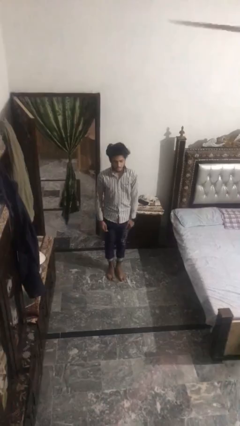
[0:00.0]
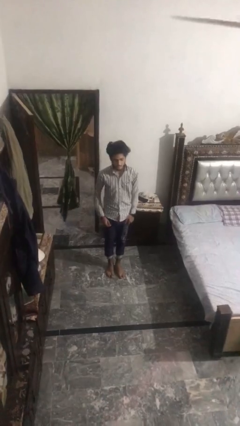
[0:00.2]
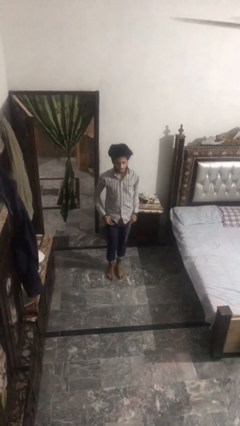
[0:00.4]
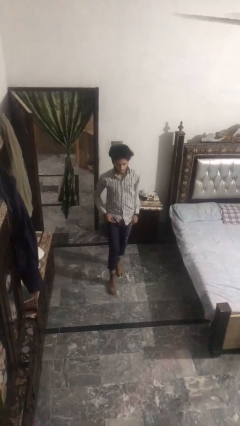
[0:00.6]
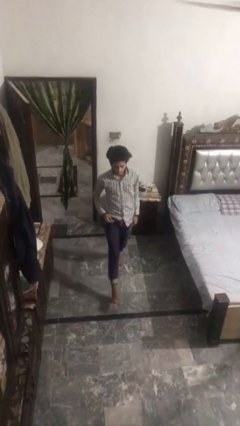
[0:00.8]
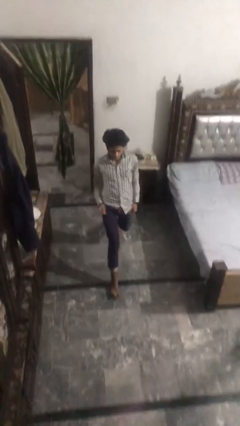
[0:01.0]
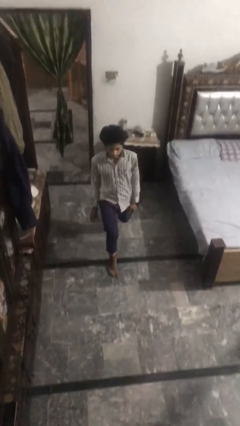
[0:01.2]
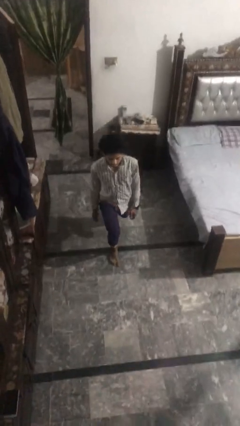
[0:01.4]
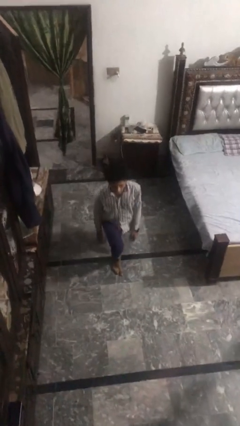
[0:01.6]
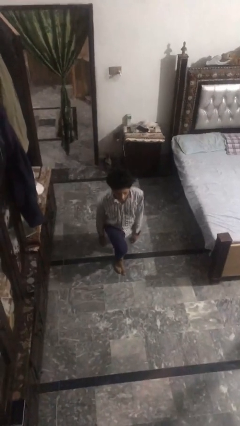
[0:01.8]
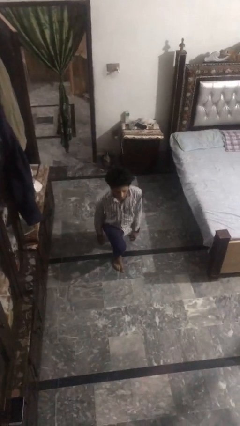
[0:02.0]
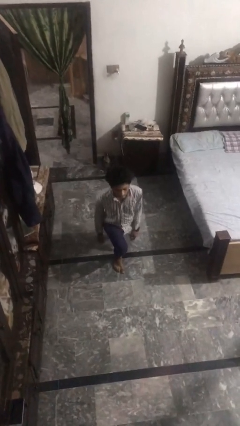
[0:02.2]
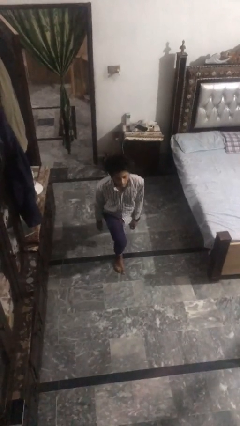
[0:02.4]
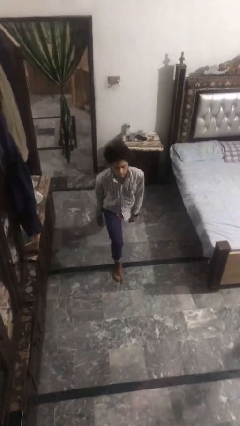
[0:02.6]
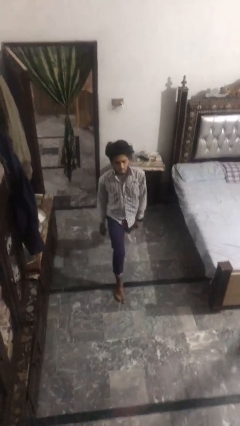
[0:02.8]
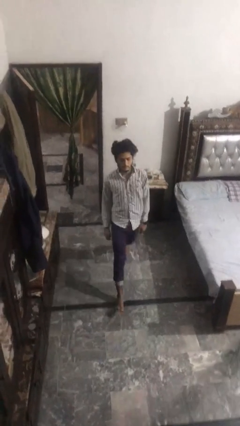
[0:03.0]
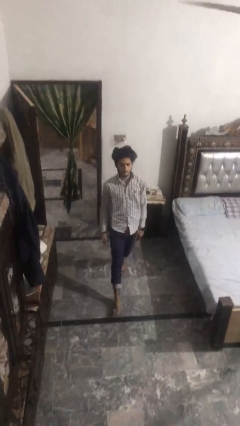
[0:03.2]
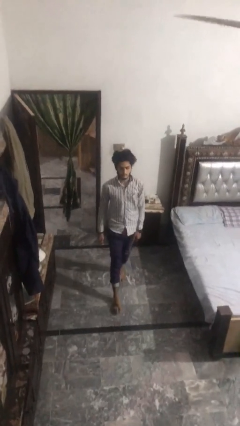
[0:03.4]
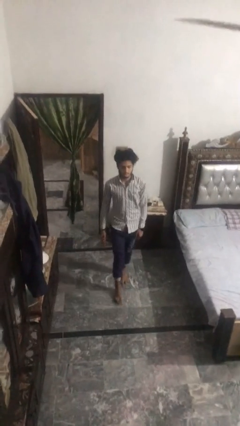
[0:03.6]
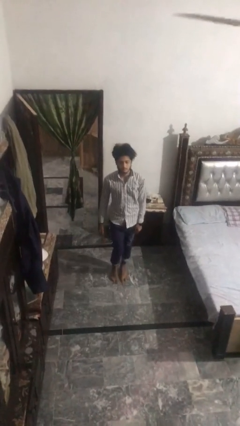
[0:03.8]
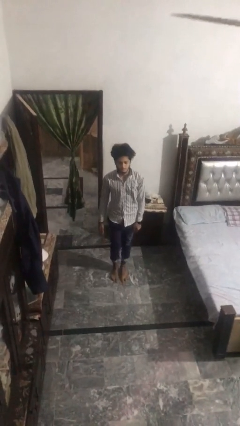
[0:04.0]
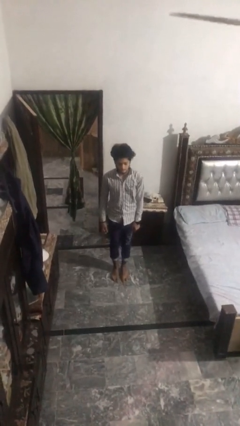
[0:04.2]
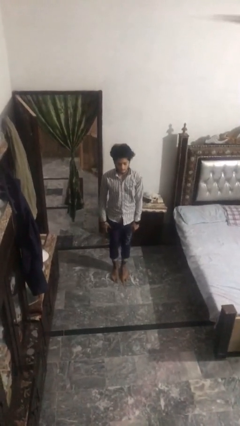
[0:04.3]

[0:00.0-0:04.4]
person exercises with lunges

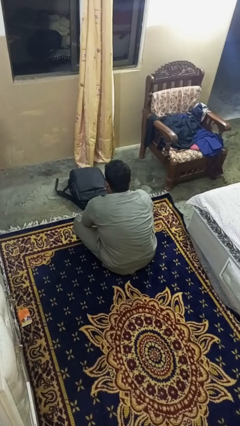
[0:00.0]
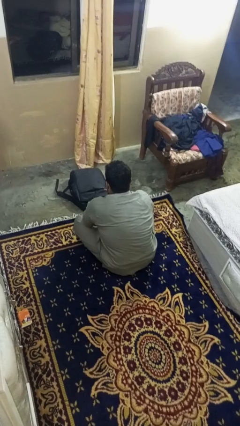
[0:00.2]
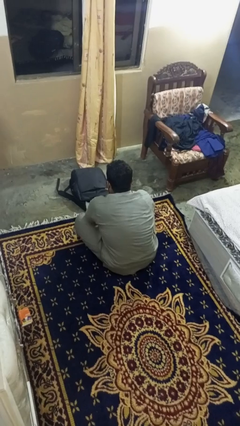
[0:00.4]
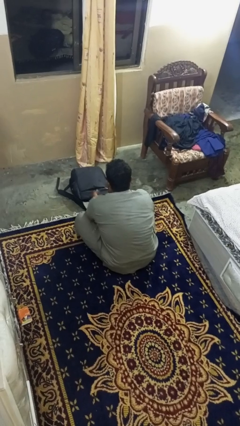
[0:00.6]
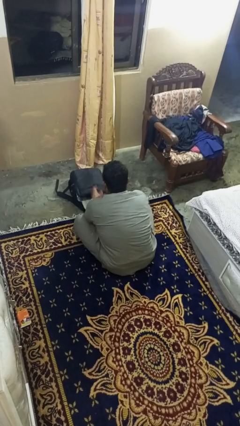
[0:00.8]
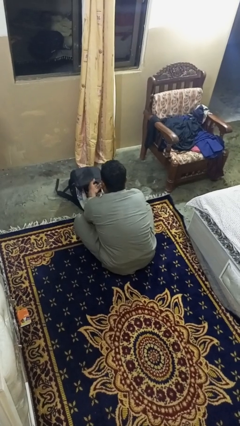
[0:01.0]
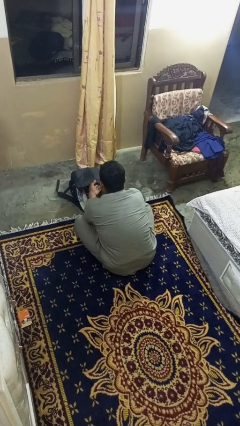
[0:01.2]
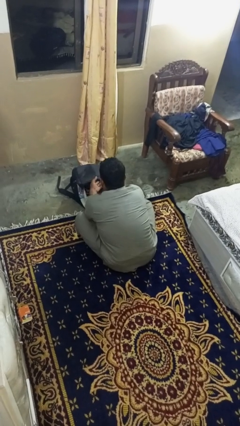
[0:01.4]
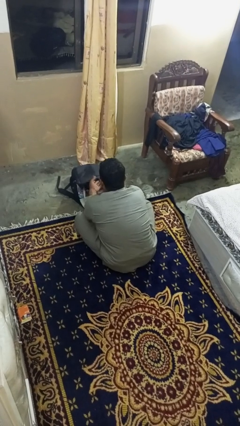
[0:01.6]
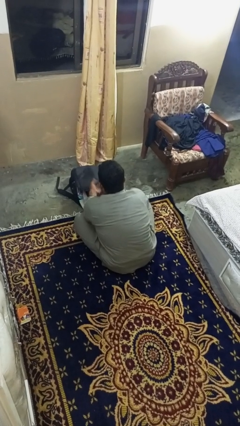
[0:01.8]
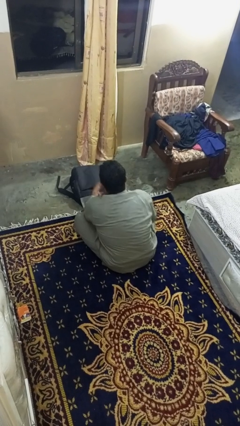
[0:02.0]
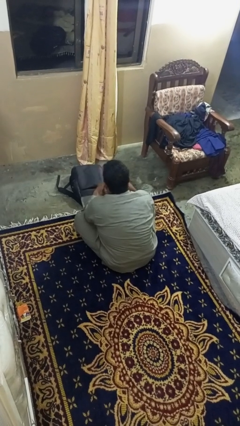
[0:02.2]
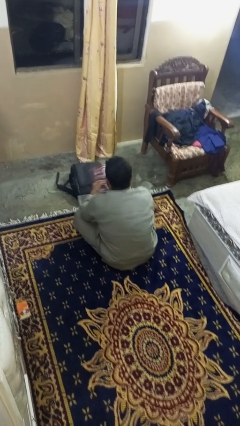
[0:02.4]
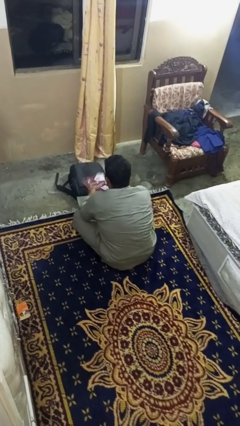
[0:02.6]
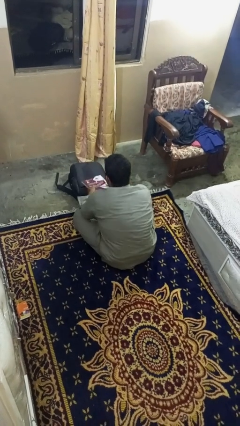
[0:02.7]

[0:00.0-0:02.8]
person takes object from bag

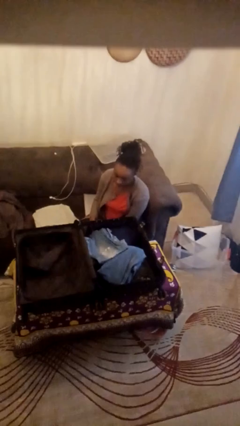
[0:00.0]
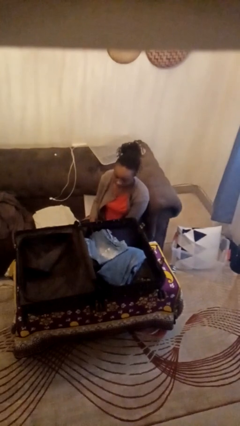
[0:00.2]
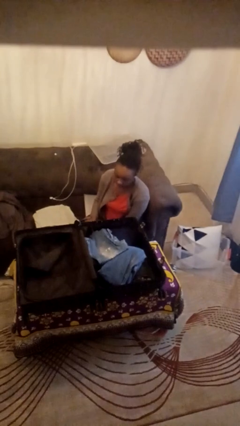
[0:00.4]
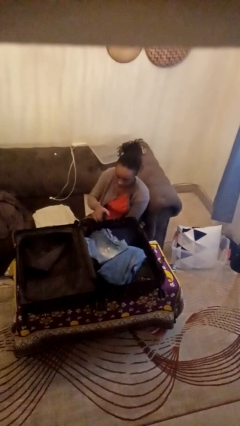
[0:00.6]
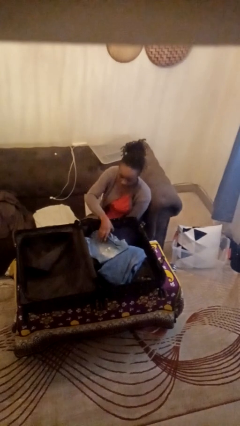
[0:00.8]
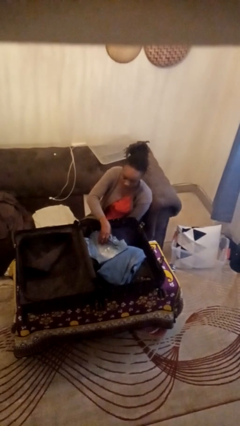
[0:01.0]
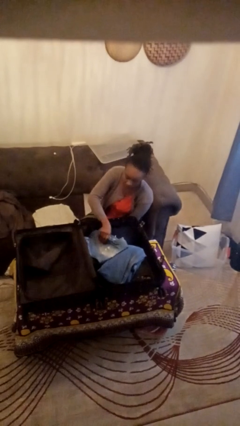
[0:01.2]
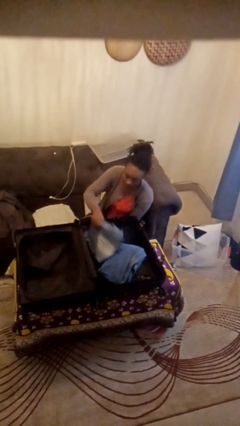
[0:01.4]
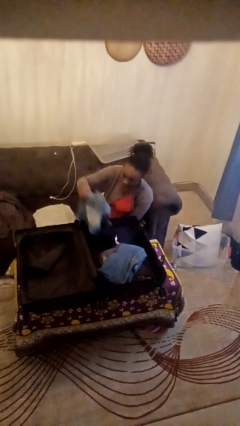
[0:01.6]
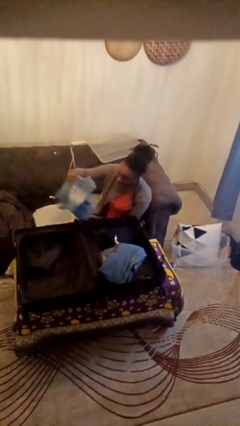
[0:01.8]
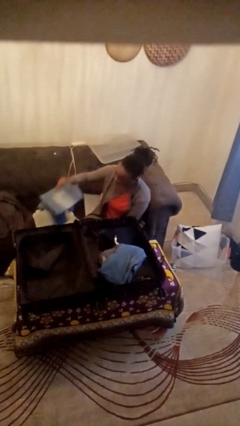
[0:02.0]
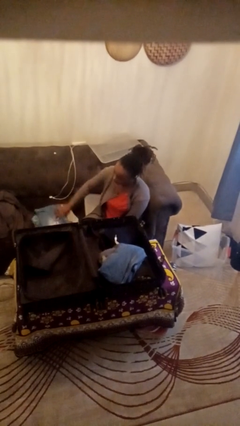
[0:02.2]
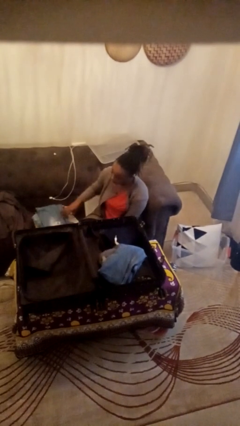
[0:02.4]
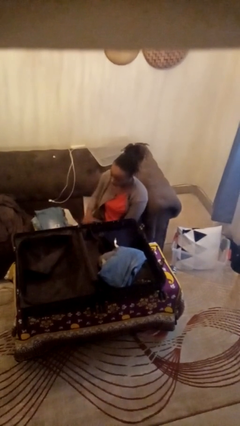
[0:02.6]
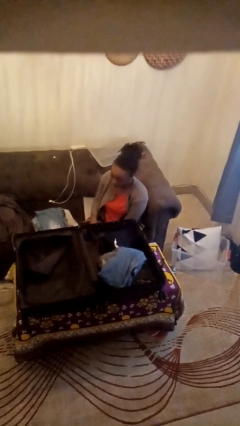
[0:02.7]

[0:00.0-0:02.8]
person unloads clothes from suitcase

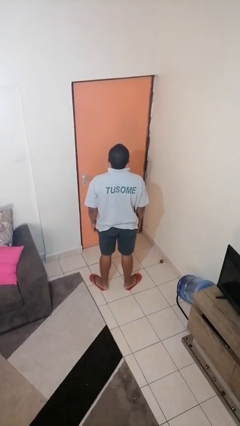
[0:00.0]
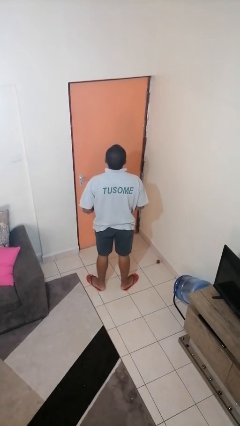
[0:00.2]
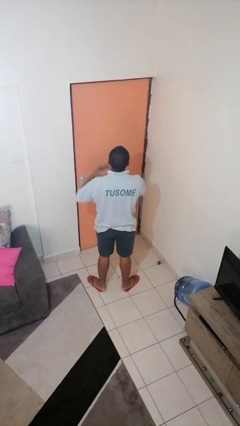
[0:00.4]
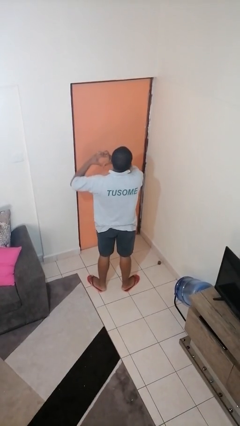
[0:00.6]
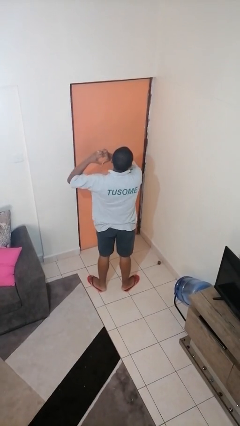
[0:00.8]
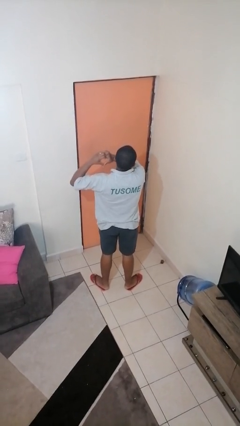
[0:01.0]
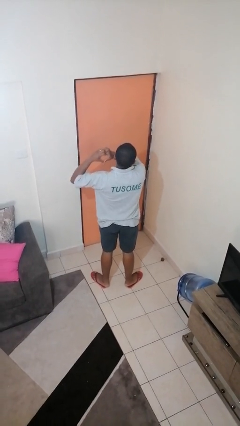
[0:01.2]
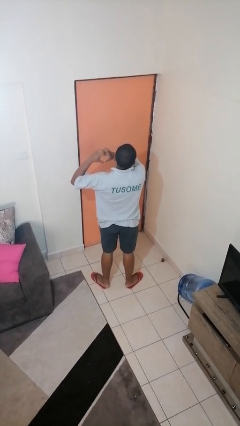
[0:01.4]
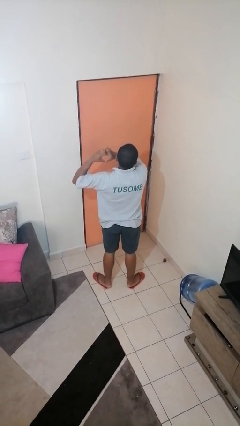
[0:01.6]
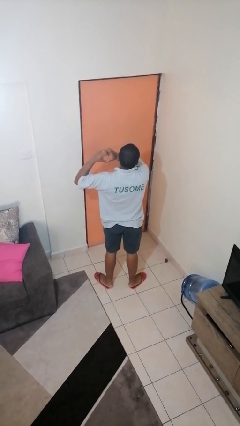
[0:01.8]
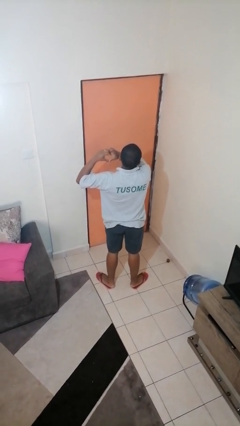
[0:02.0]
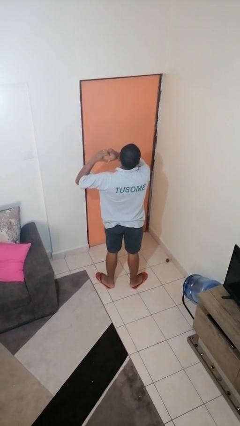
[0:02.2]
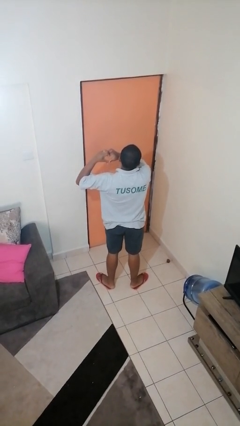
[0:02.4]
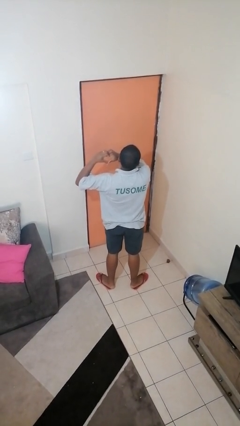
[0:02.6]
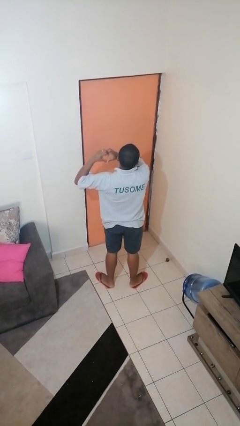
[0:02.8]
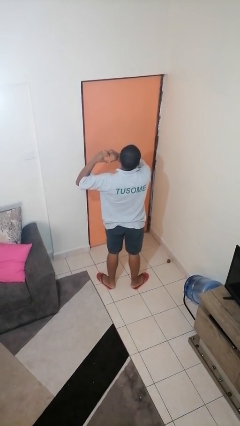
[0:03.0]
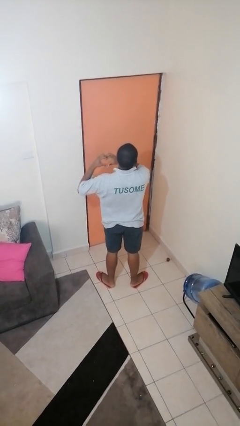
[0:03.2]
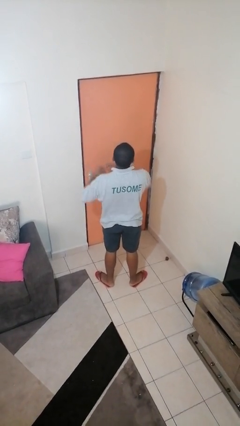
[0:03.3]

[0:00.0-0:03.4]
person gestures heart

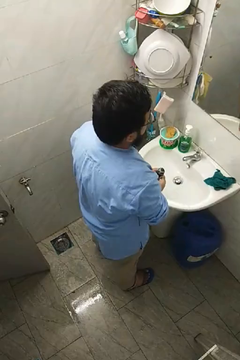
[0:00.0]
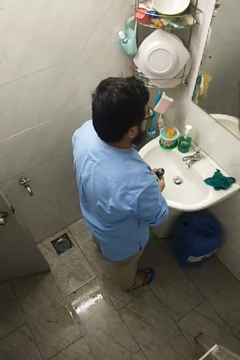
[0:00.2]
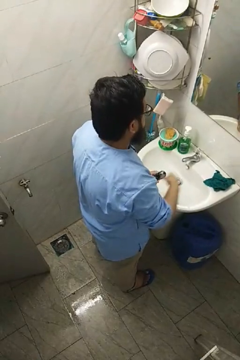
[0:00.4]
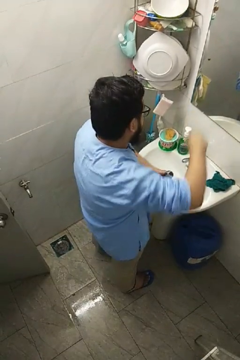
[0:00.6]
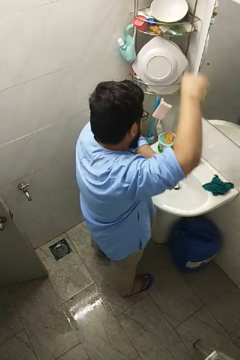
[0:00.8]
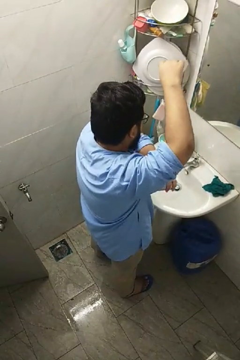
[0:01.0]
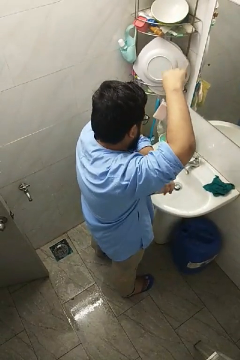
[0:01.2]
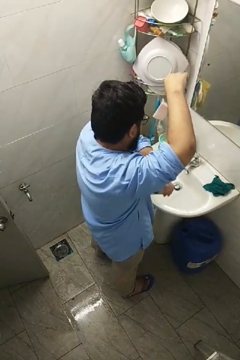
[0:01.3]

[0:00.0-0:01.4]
person applies deodorant

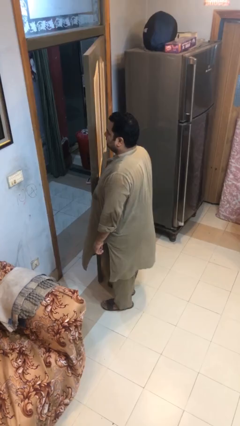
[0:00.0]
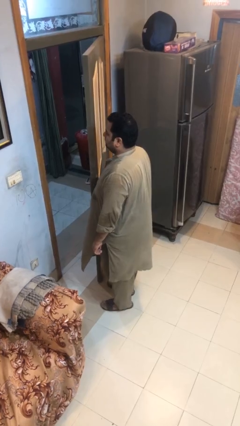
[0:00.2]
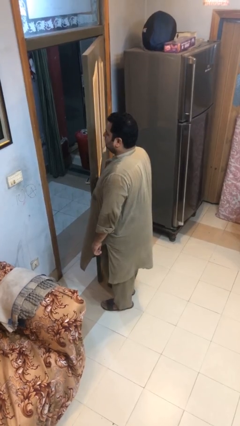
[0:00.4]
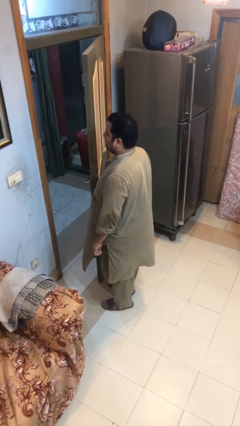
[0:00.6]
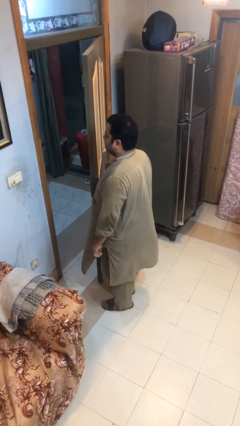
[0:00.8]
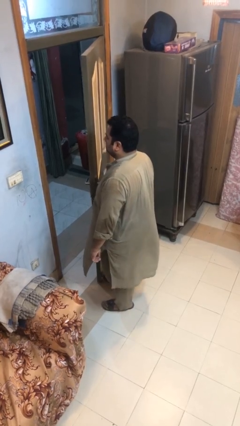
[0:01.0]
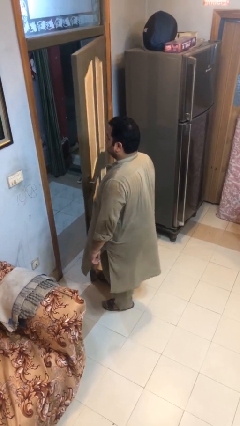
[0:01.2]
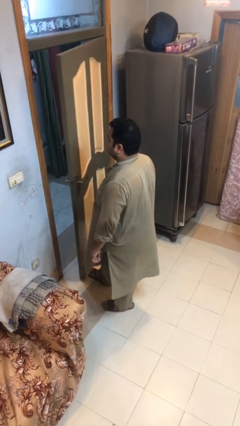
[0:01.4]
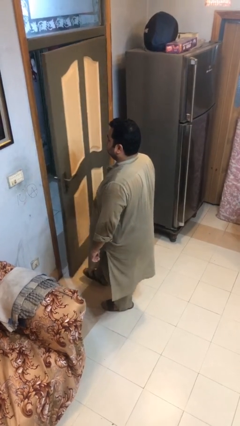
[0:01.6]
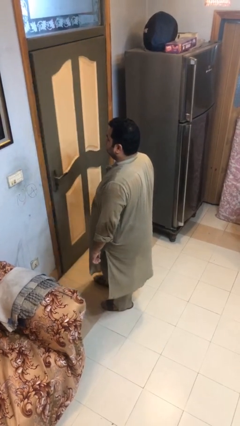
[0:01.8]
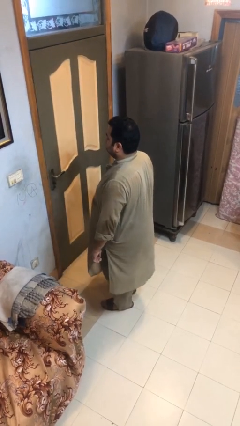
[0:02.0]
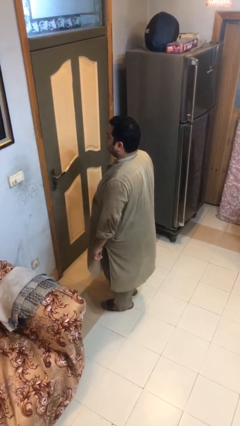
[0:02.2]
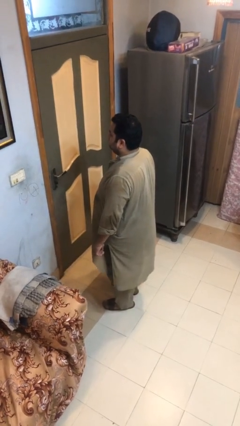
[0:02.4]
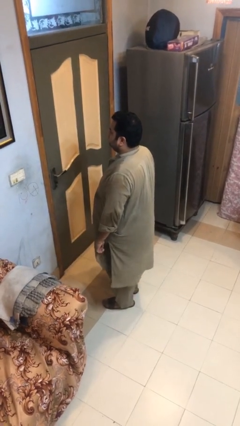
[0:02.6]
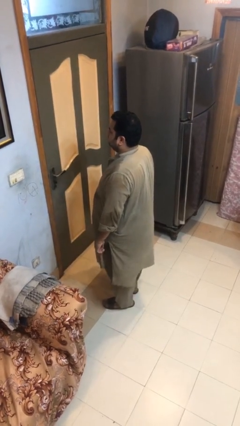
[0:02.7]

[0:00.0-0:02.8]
person closes door with foot

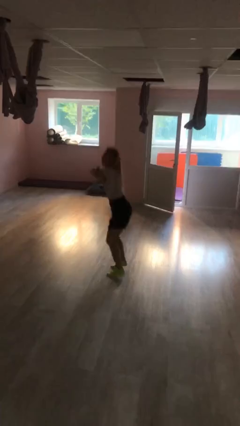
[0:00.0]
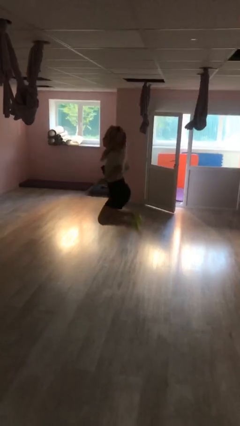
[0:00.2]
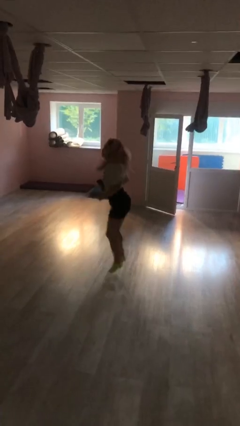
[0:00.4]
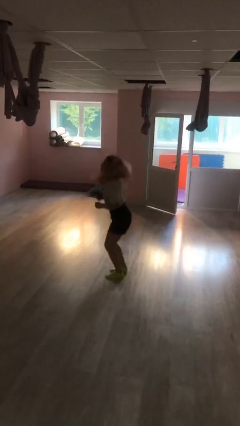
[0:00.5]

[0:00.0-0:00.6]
person jumps
